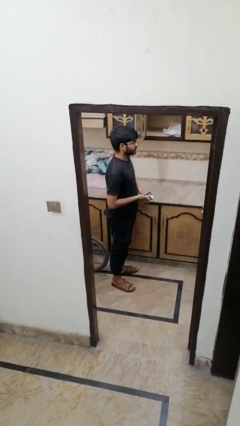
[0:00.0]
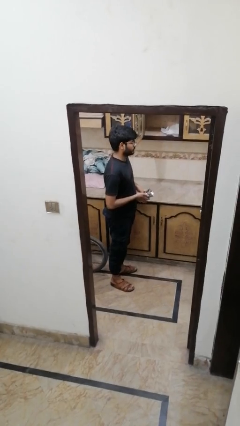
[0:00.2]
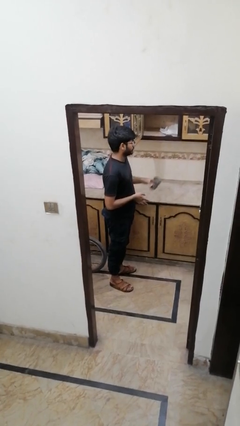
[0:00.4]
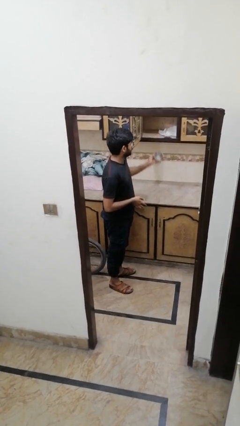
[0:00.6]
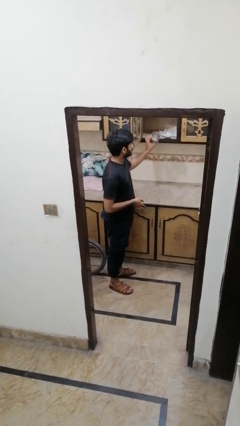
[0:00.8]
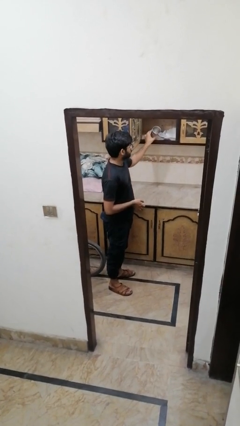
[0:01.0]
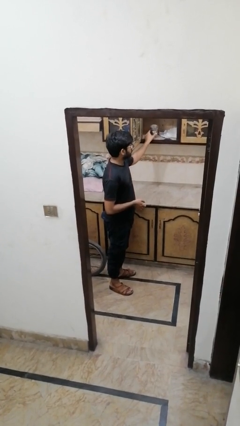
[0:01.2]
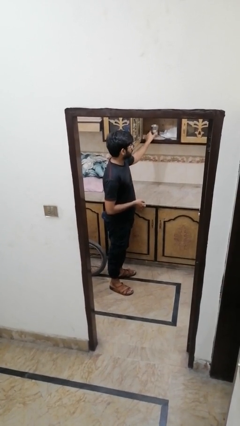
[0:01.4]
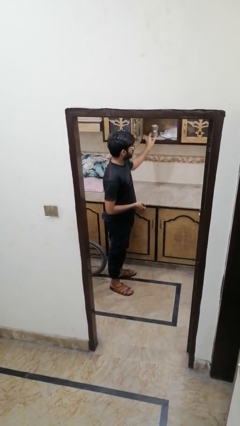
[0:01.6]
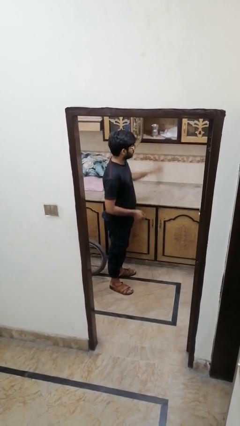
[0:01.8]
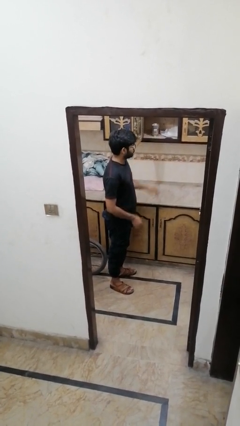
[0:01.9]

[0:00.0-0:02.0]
person puts down object into cabinet

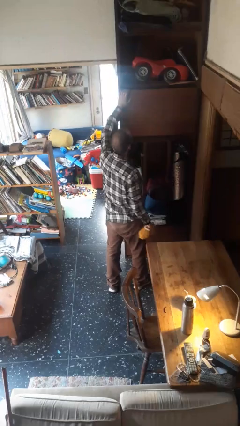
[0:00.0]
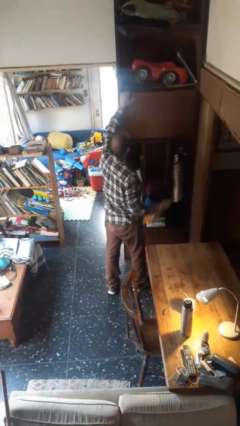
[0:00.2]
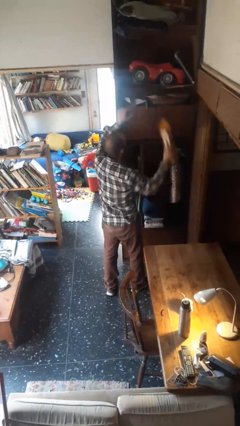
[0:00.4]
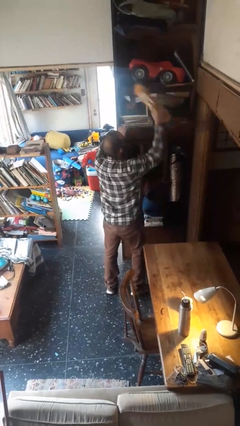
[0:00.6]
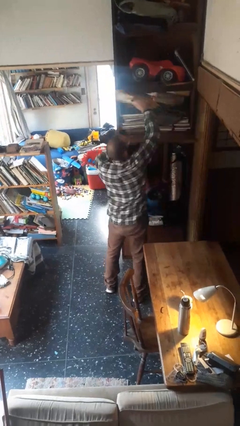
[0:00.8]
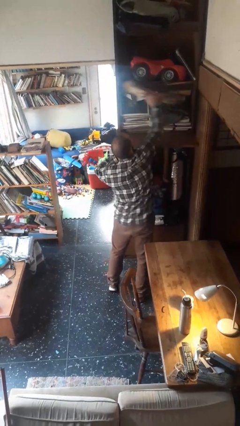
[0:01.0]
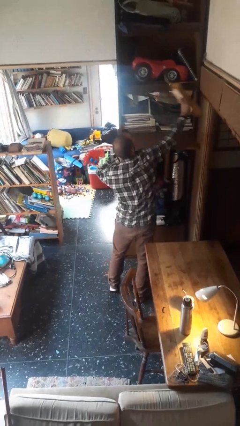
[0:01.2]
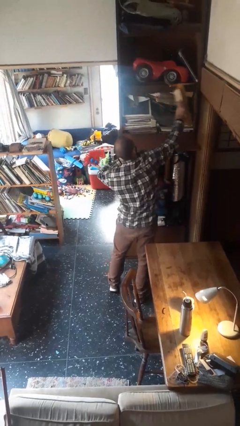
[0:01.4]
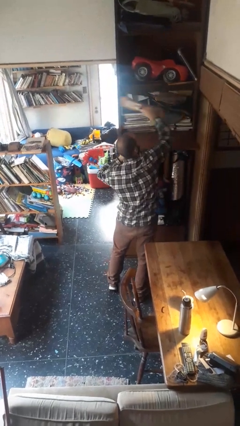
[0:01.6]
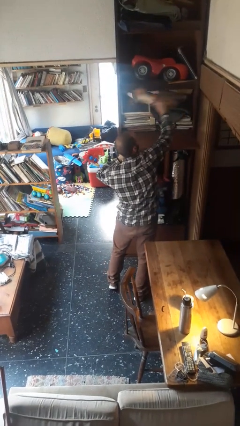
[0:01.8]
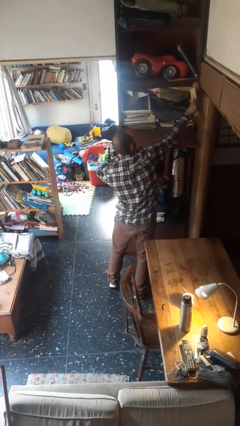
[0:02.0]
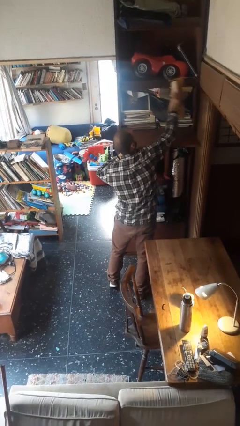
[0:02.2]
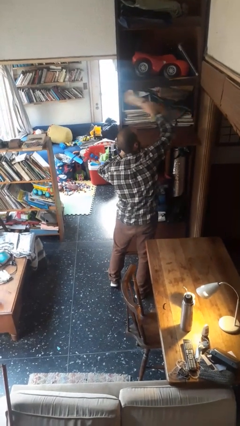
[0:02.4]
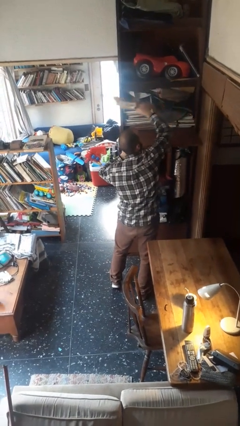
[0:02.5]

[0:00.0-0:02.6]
person dusts furniture

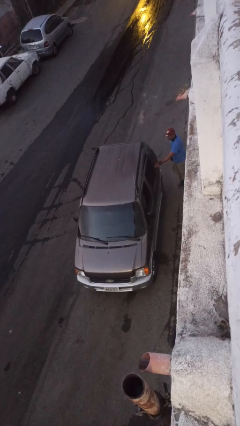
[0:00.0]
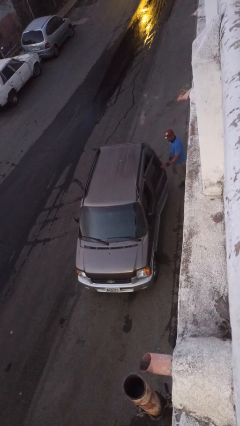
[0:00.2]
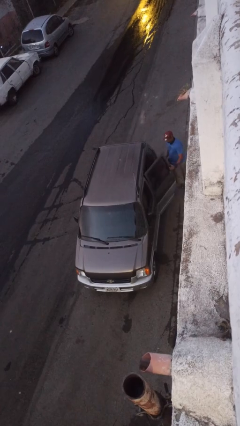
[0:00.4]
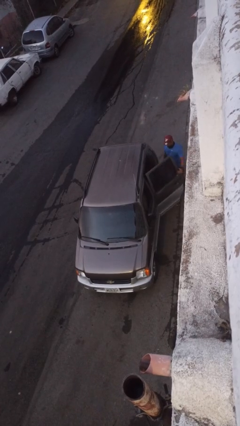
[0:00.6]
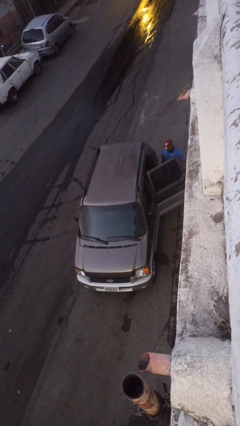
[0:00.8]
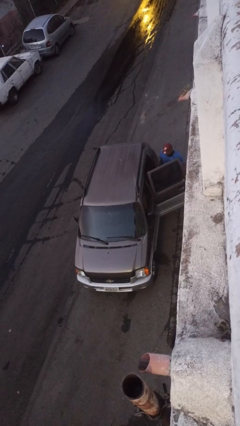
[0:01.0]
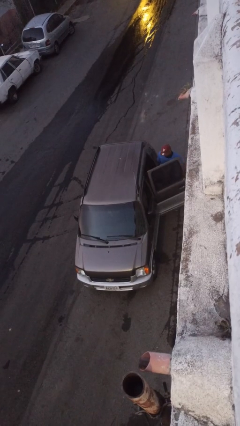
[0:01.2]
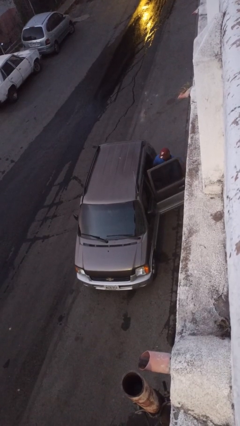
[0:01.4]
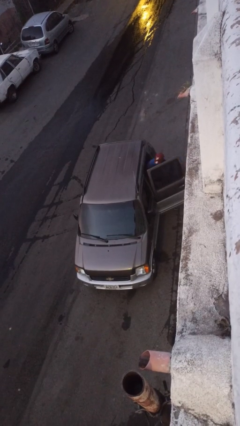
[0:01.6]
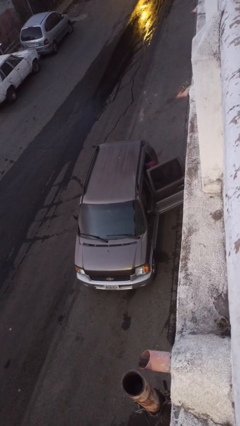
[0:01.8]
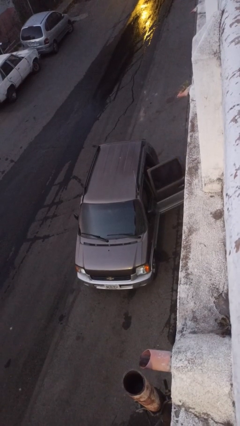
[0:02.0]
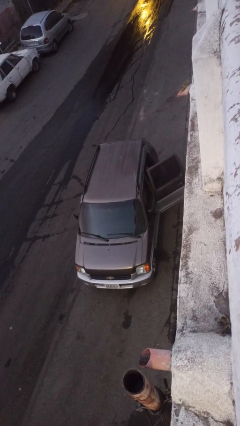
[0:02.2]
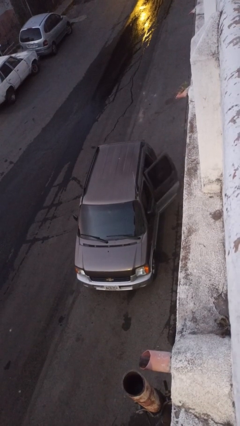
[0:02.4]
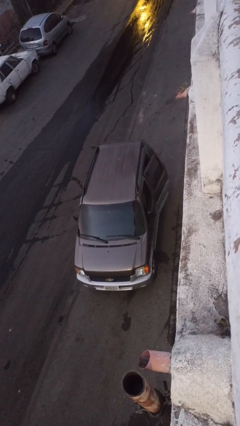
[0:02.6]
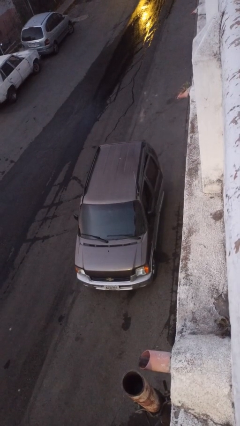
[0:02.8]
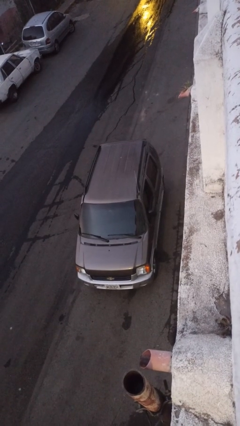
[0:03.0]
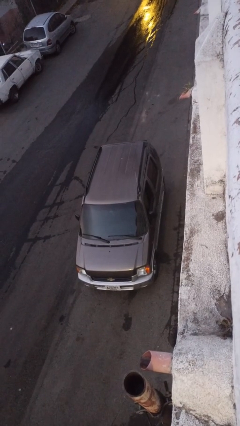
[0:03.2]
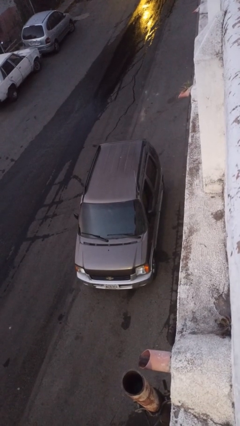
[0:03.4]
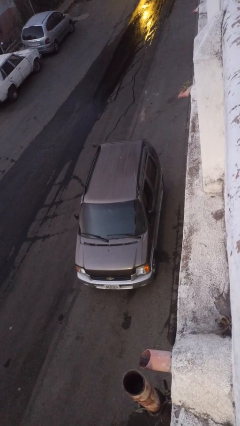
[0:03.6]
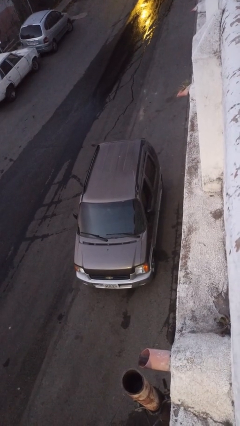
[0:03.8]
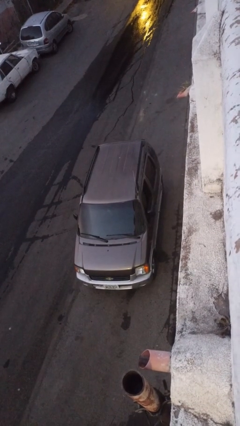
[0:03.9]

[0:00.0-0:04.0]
car picks up person

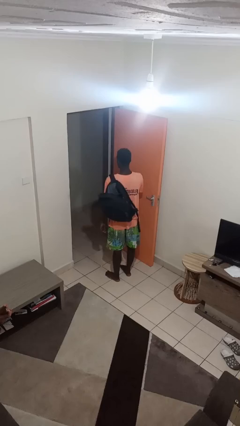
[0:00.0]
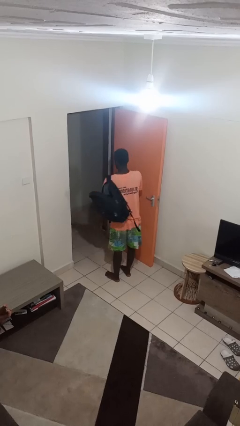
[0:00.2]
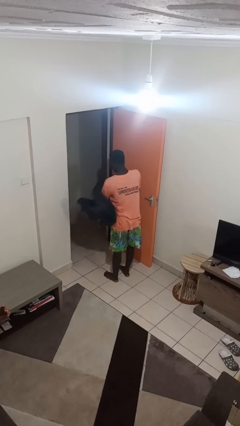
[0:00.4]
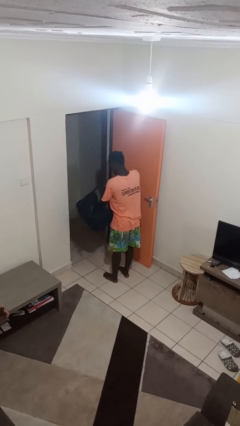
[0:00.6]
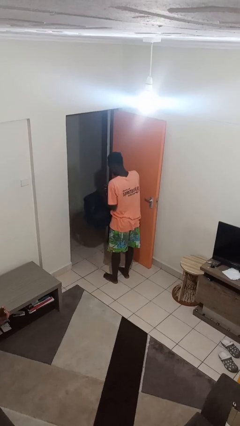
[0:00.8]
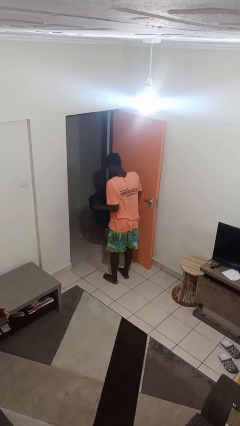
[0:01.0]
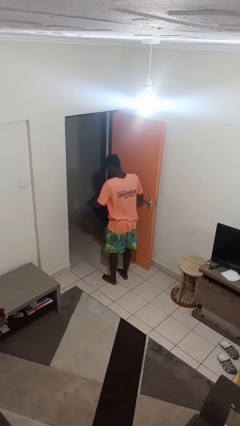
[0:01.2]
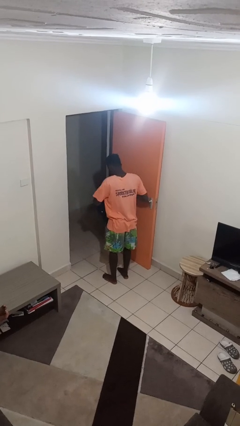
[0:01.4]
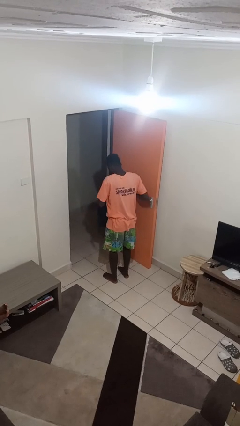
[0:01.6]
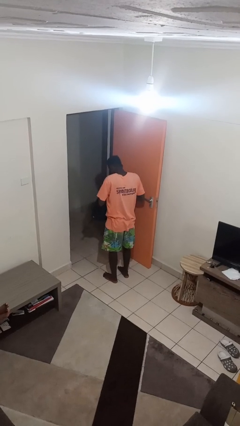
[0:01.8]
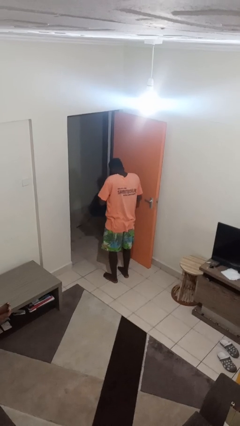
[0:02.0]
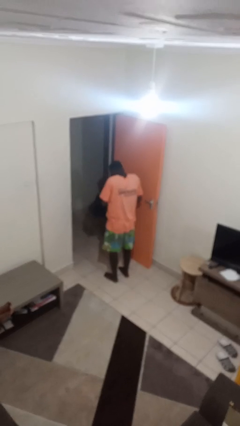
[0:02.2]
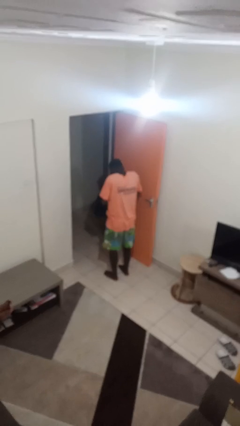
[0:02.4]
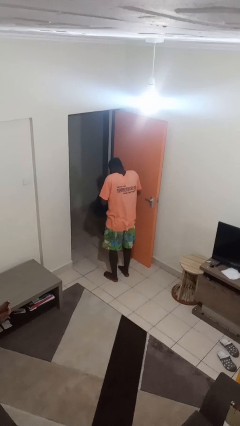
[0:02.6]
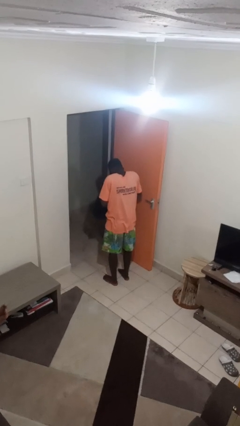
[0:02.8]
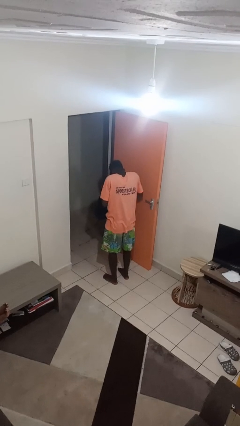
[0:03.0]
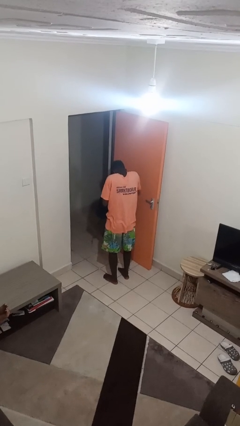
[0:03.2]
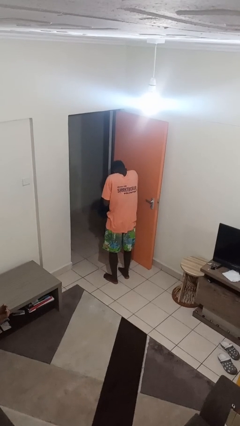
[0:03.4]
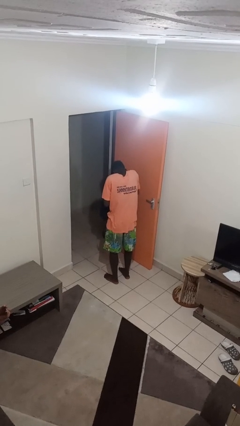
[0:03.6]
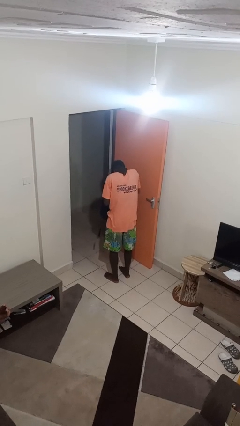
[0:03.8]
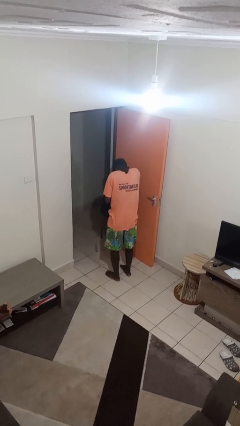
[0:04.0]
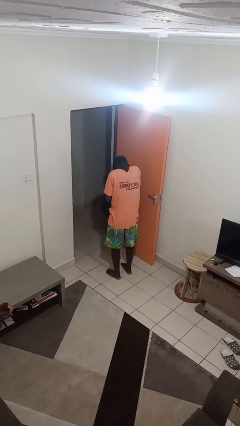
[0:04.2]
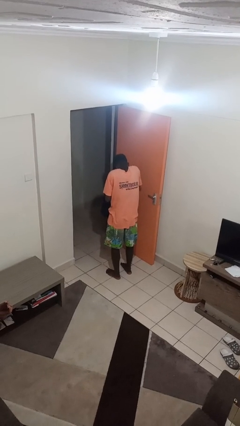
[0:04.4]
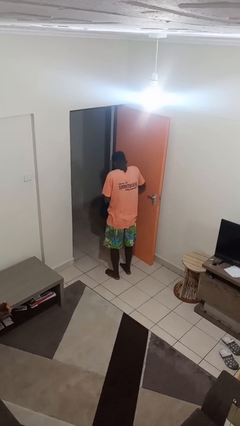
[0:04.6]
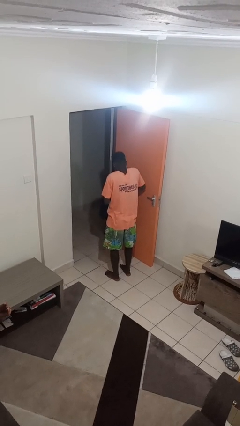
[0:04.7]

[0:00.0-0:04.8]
person searches in backpack

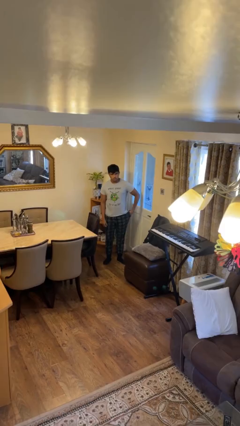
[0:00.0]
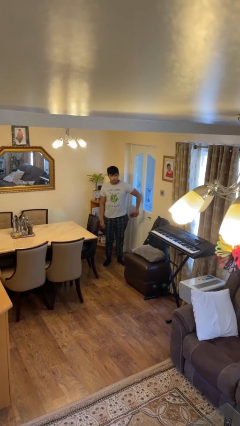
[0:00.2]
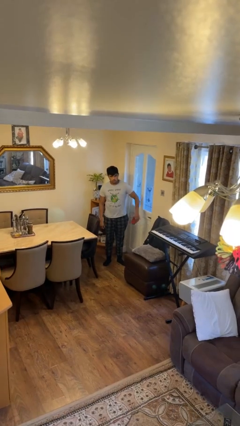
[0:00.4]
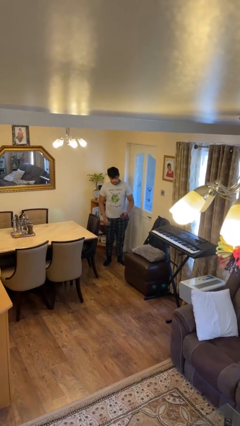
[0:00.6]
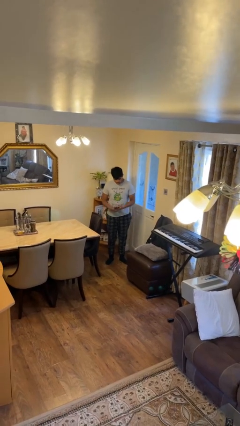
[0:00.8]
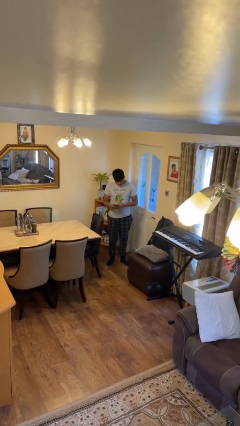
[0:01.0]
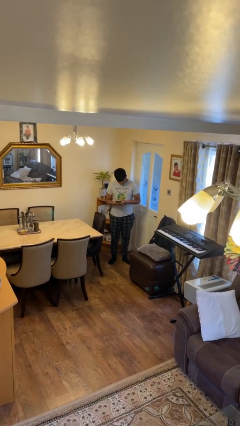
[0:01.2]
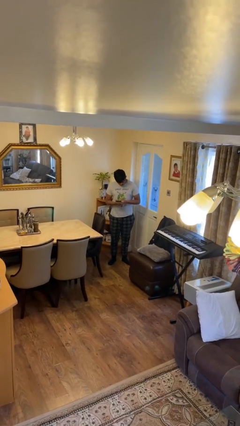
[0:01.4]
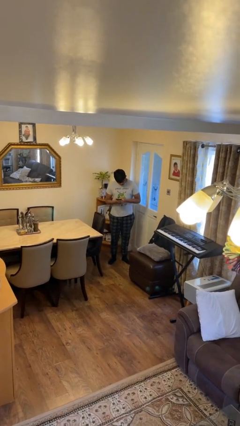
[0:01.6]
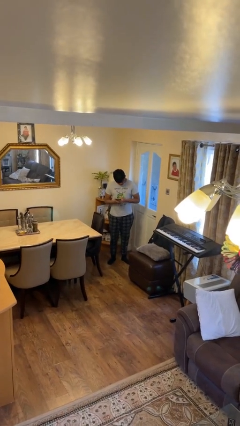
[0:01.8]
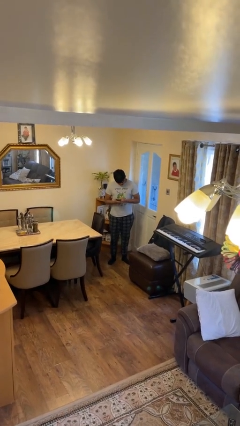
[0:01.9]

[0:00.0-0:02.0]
person takes phone from pocket

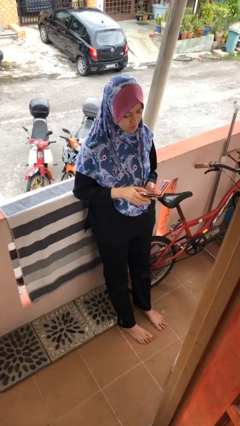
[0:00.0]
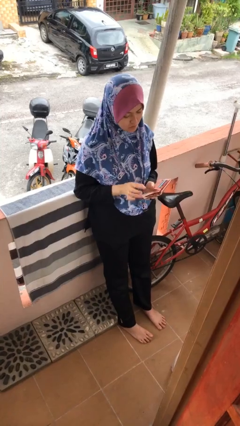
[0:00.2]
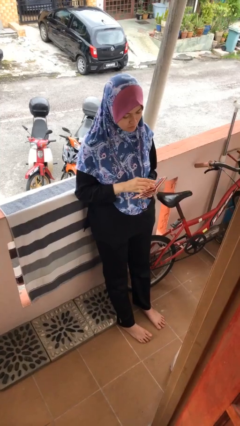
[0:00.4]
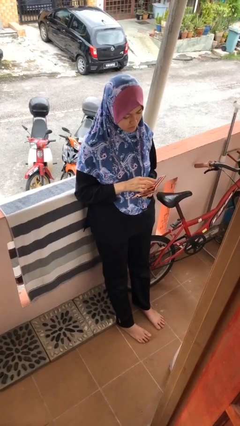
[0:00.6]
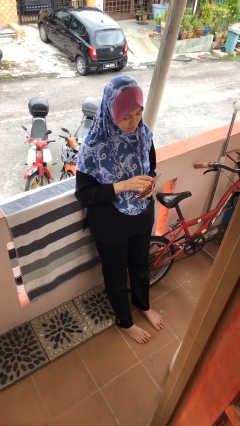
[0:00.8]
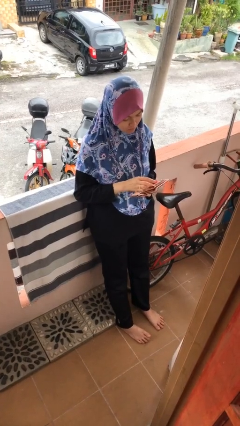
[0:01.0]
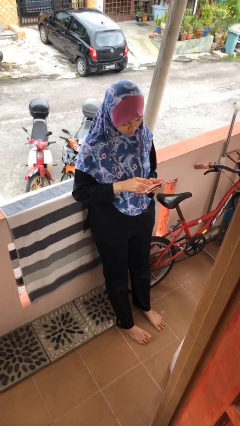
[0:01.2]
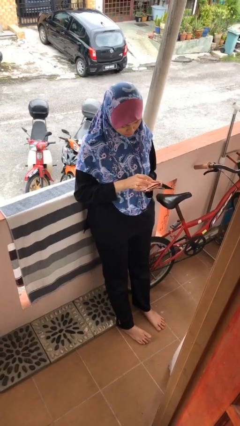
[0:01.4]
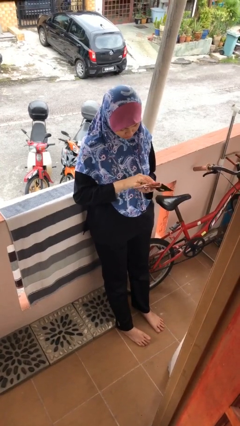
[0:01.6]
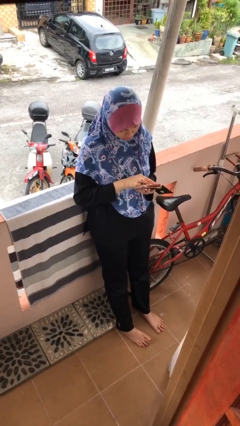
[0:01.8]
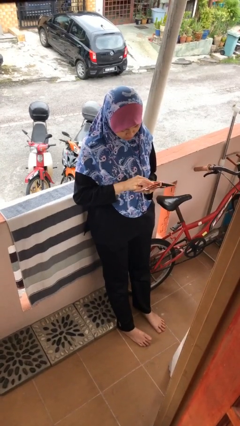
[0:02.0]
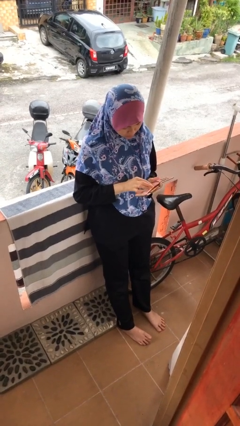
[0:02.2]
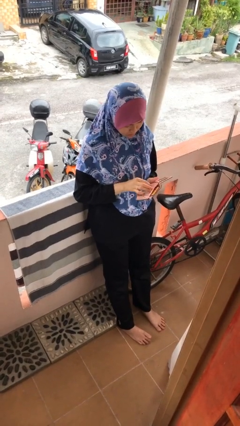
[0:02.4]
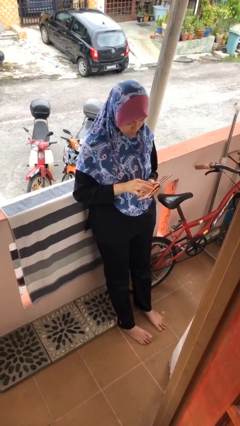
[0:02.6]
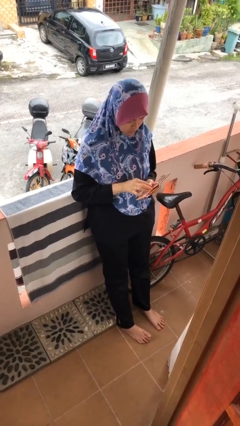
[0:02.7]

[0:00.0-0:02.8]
person searches in purse
